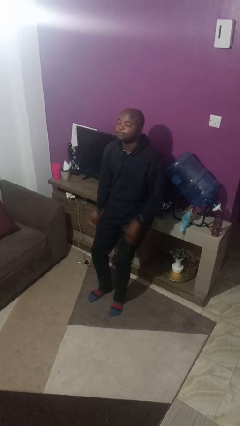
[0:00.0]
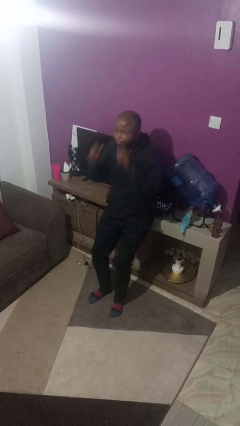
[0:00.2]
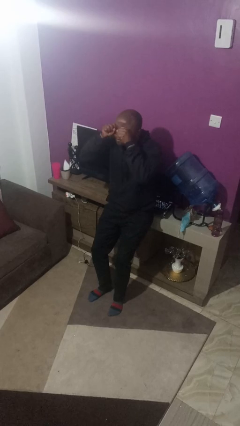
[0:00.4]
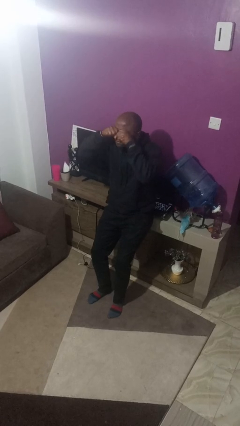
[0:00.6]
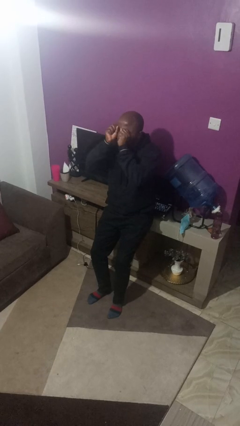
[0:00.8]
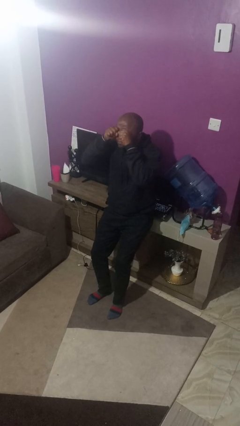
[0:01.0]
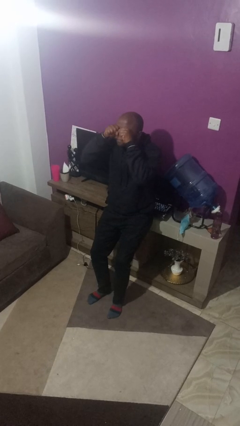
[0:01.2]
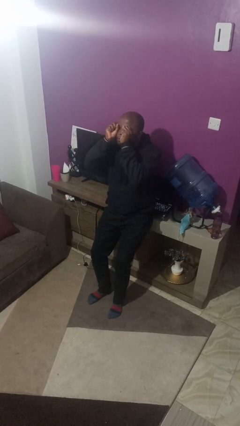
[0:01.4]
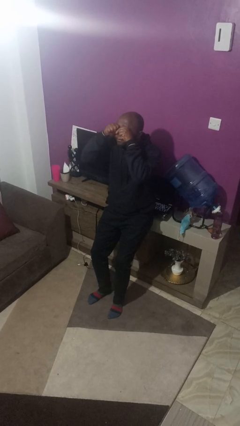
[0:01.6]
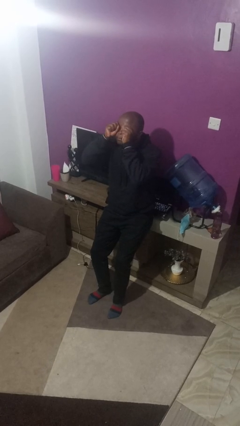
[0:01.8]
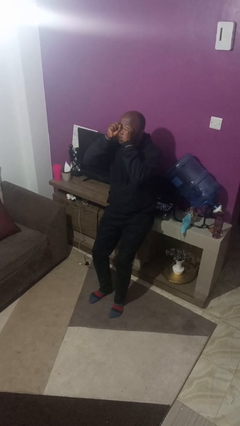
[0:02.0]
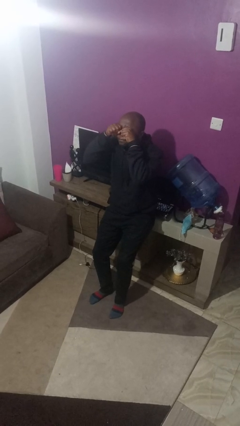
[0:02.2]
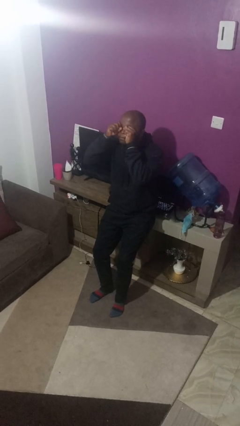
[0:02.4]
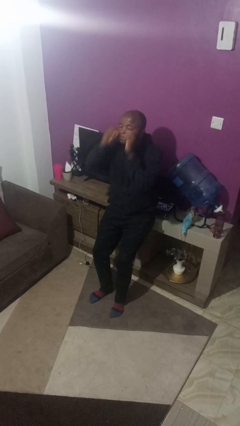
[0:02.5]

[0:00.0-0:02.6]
person rubs eyes

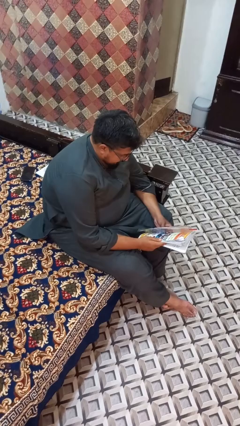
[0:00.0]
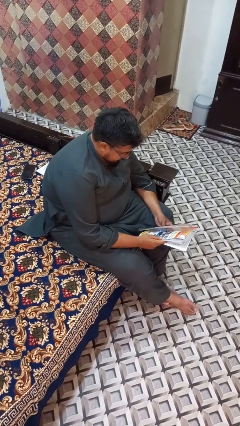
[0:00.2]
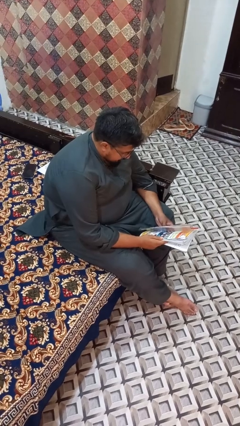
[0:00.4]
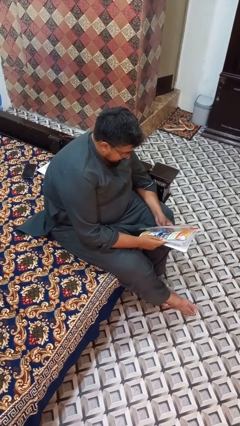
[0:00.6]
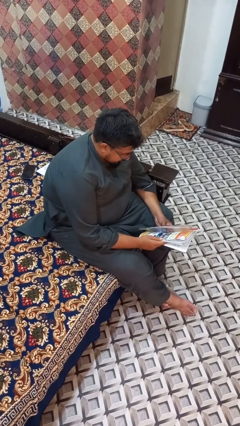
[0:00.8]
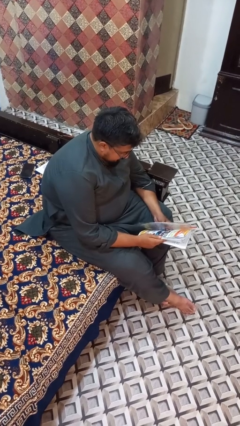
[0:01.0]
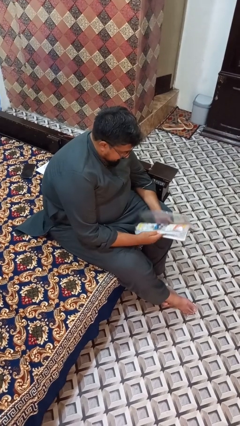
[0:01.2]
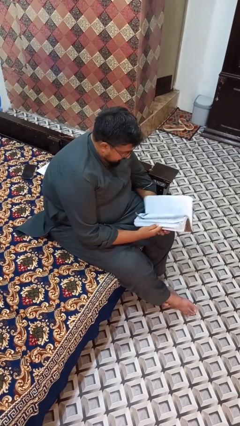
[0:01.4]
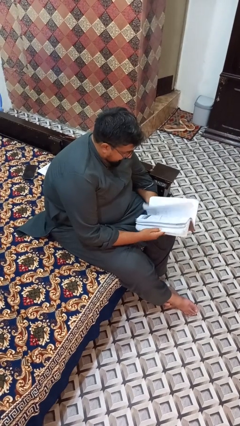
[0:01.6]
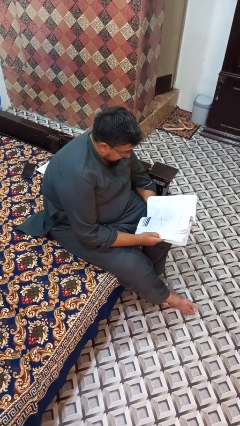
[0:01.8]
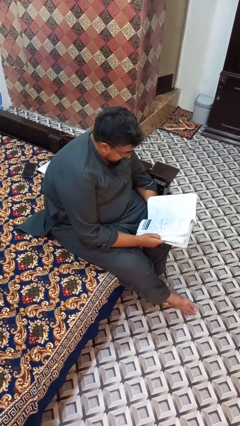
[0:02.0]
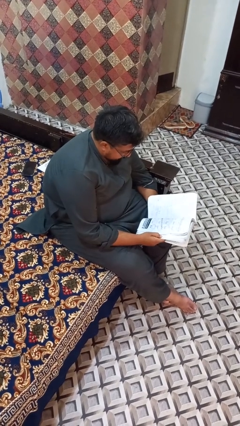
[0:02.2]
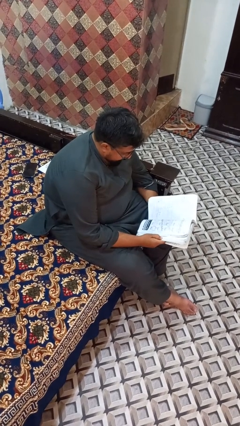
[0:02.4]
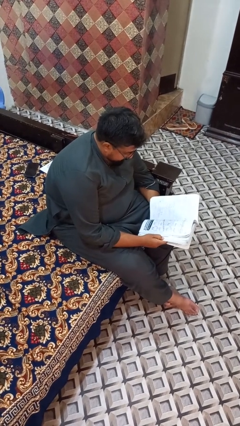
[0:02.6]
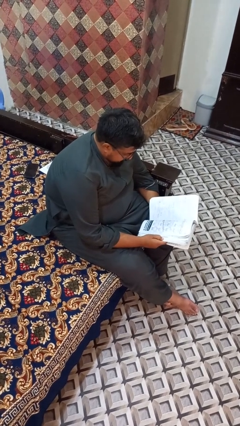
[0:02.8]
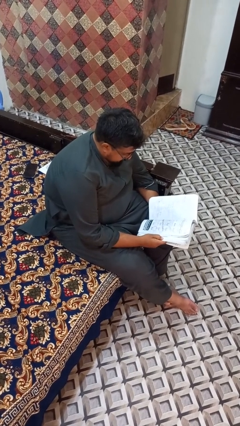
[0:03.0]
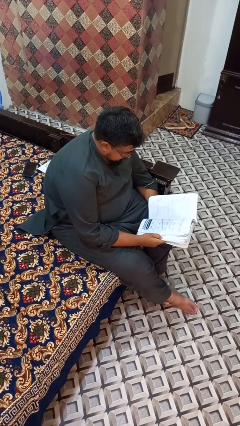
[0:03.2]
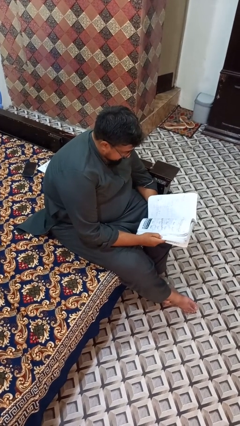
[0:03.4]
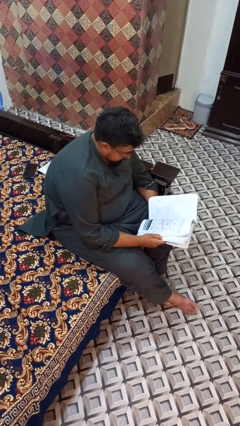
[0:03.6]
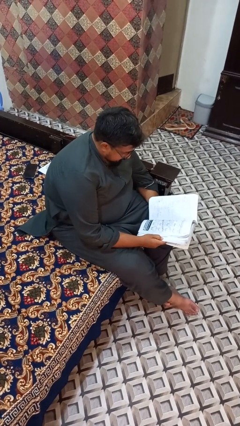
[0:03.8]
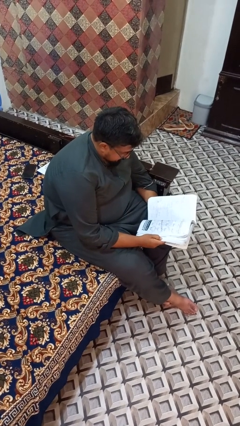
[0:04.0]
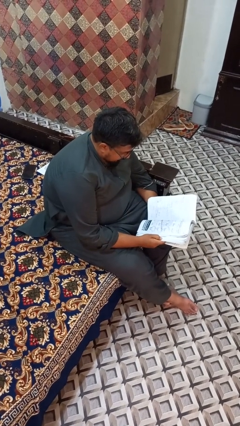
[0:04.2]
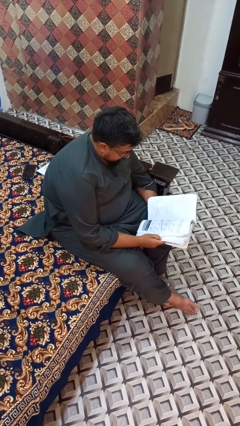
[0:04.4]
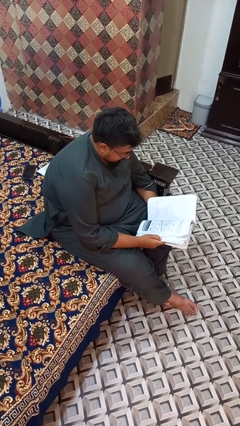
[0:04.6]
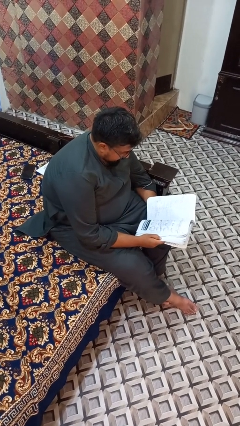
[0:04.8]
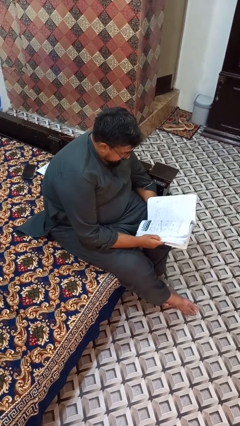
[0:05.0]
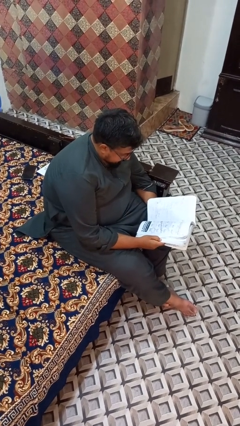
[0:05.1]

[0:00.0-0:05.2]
person reads book

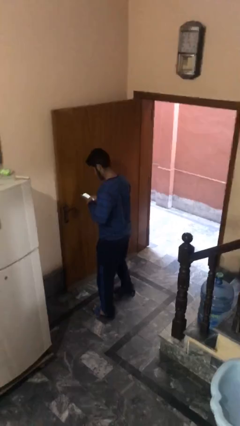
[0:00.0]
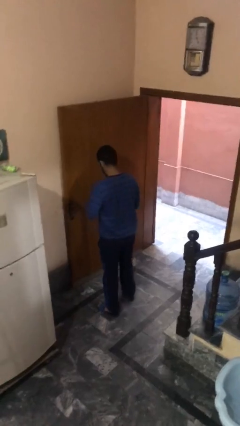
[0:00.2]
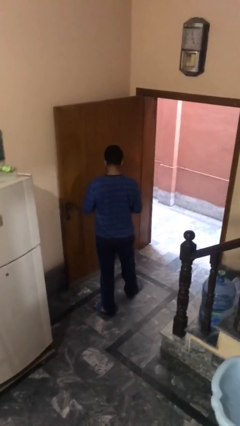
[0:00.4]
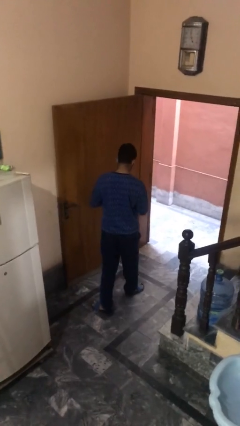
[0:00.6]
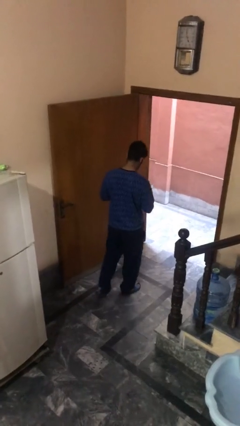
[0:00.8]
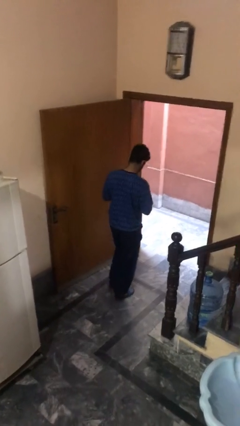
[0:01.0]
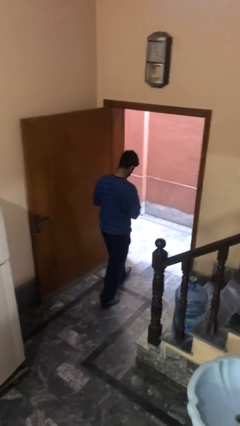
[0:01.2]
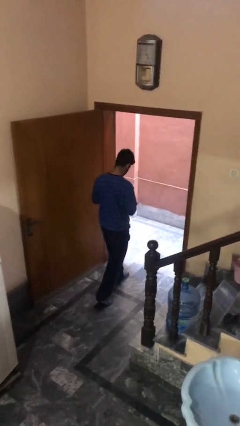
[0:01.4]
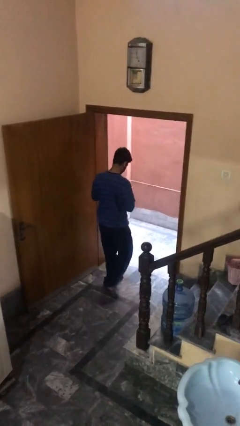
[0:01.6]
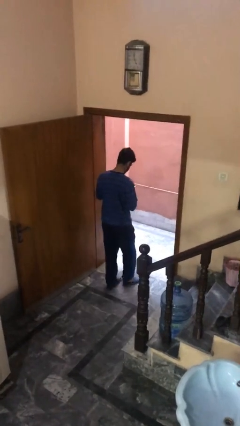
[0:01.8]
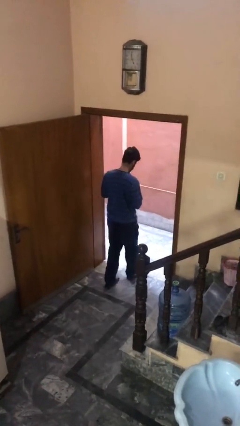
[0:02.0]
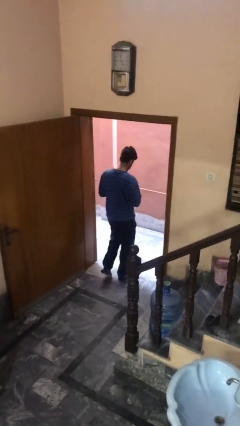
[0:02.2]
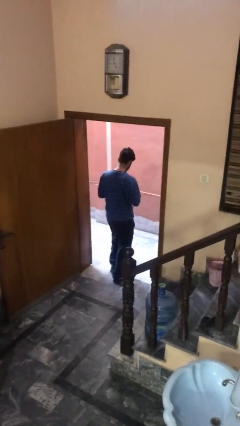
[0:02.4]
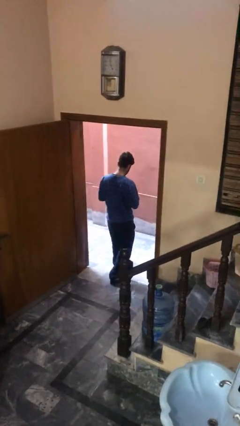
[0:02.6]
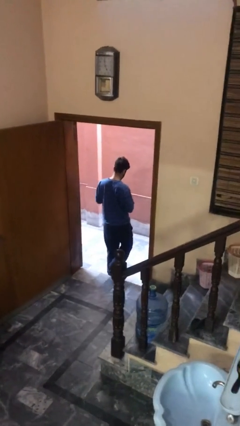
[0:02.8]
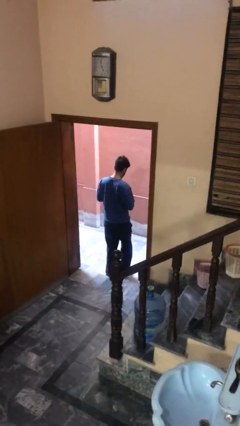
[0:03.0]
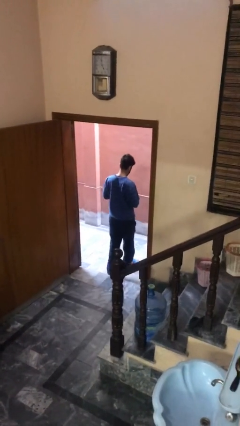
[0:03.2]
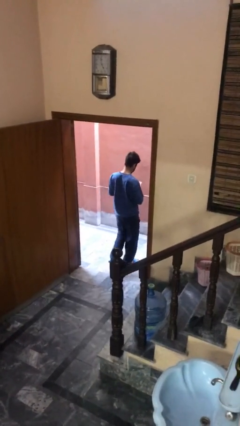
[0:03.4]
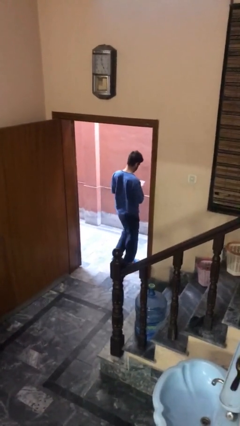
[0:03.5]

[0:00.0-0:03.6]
person exits scene through structure

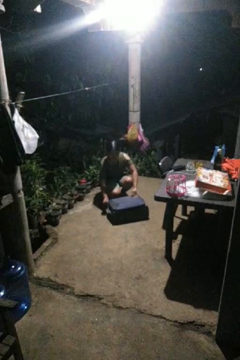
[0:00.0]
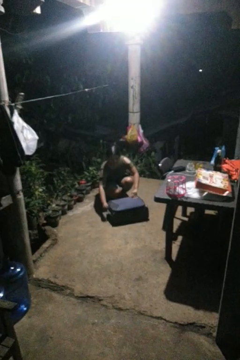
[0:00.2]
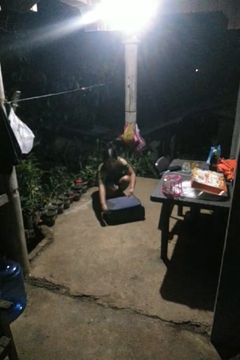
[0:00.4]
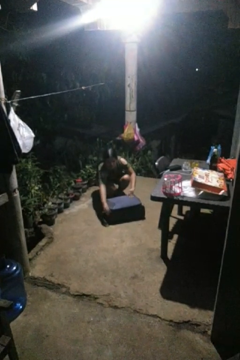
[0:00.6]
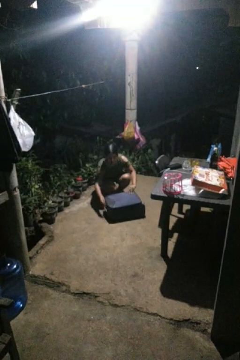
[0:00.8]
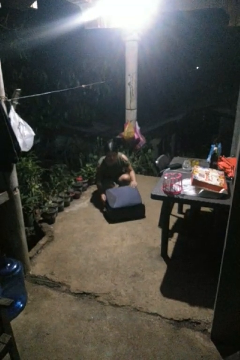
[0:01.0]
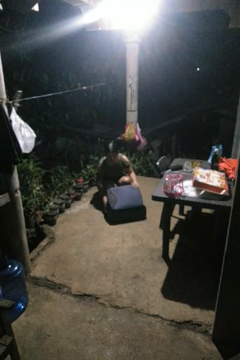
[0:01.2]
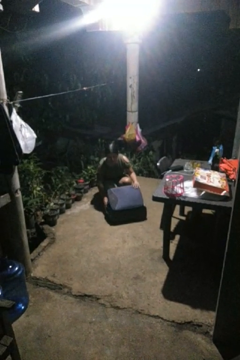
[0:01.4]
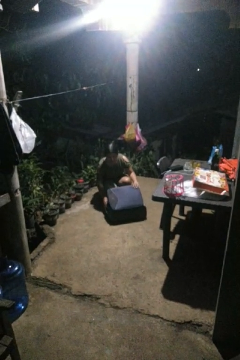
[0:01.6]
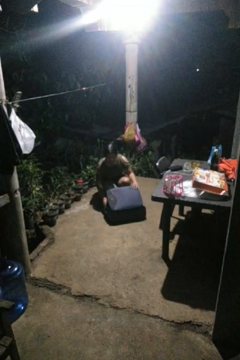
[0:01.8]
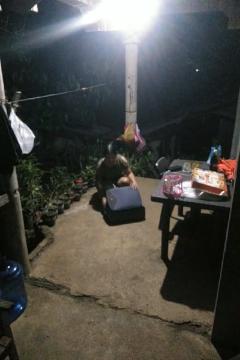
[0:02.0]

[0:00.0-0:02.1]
person opens suitcase

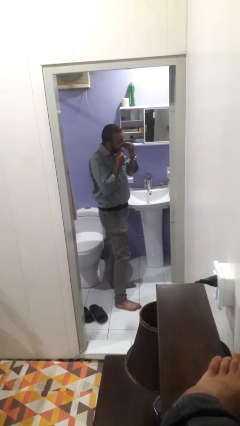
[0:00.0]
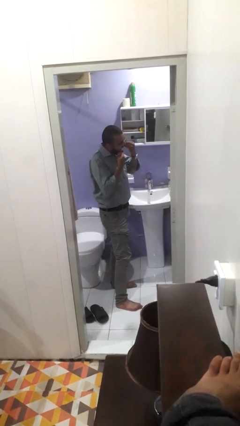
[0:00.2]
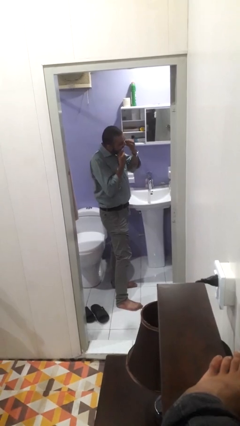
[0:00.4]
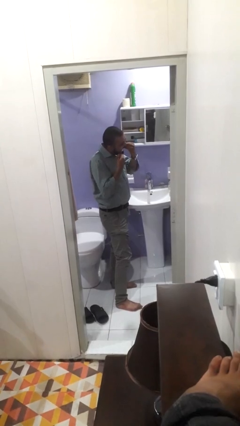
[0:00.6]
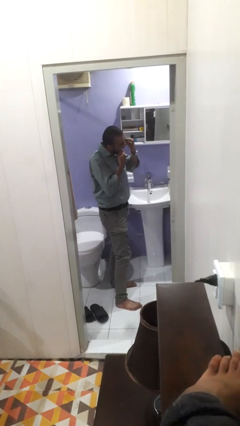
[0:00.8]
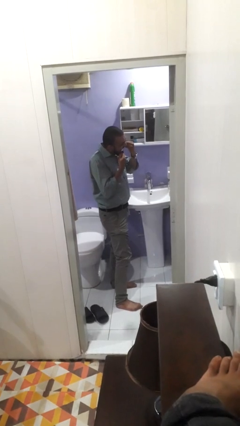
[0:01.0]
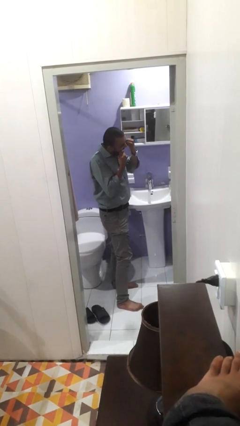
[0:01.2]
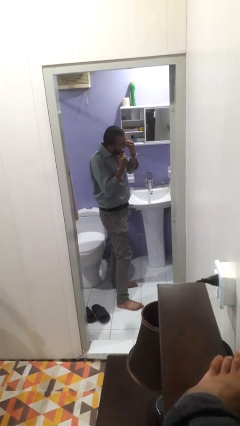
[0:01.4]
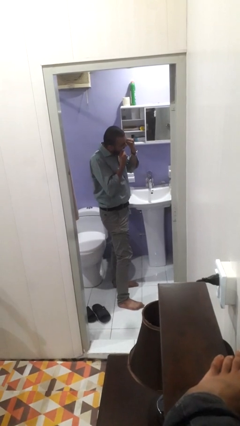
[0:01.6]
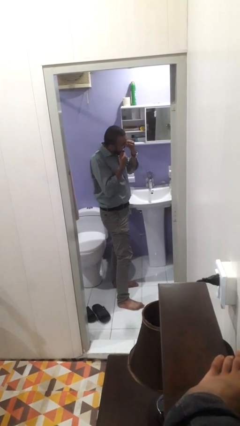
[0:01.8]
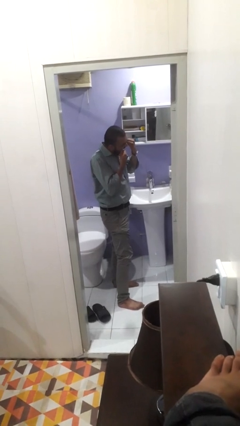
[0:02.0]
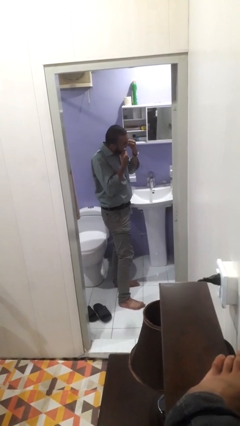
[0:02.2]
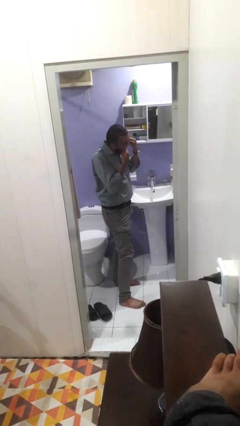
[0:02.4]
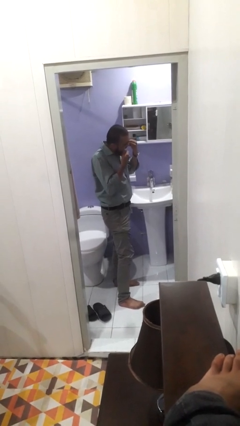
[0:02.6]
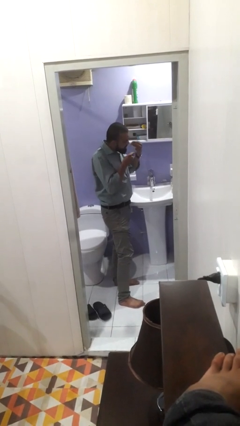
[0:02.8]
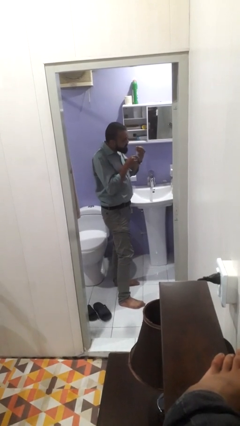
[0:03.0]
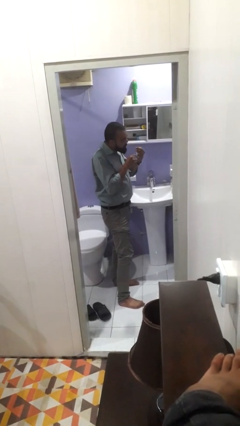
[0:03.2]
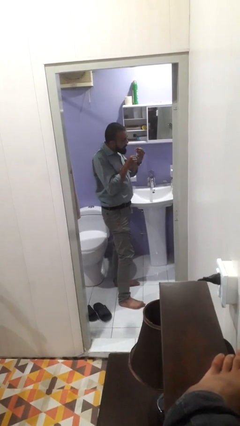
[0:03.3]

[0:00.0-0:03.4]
person flosses

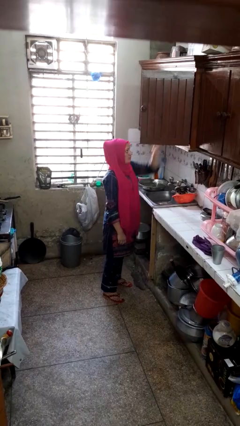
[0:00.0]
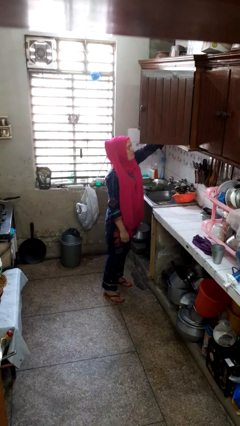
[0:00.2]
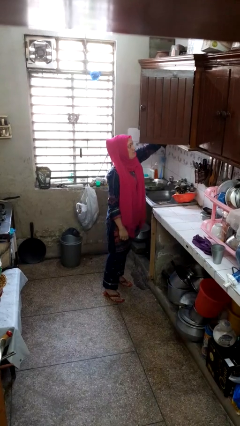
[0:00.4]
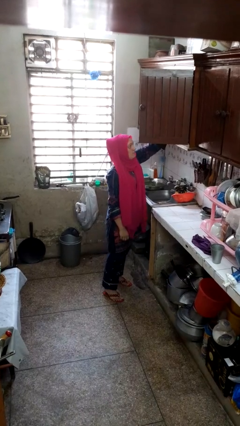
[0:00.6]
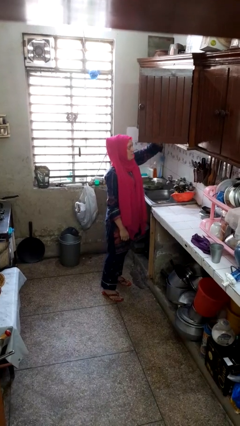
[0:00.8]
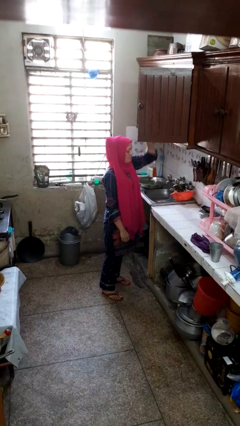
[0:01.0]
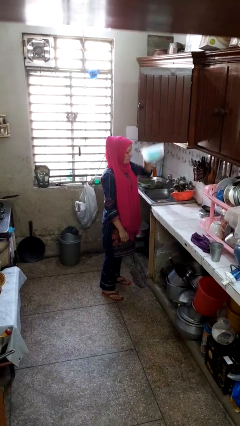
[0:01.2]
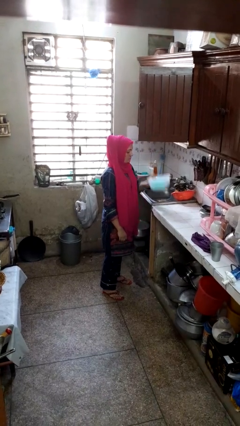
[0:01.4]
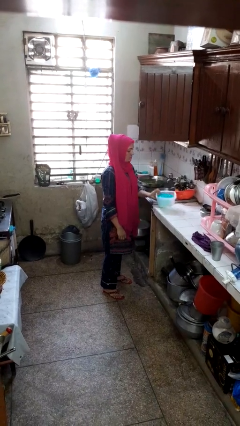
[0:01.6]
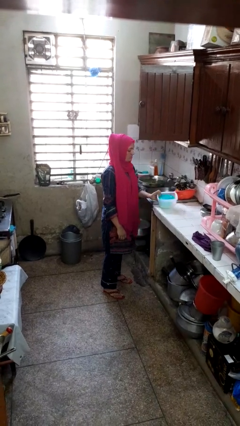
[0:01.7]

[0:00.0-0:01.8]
person takes object from cabinet
